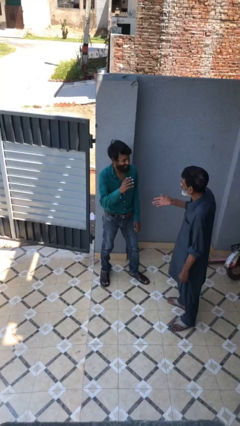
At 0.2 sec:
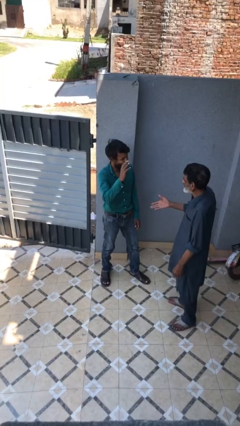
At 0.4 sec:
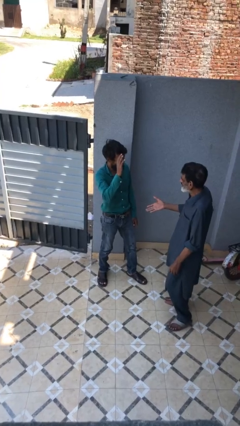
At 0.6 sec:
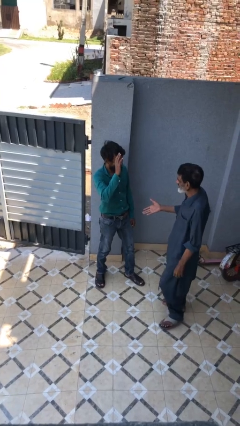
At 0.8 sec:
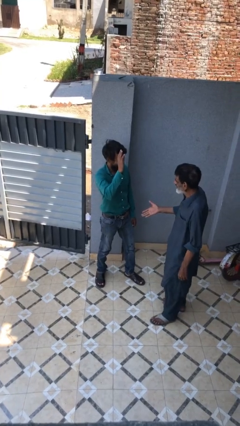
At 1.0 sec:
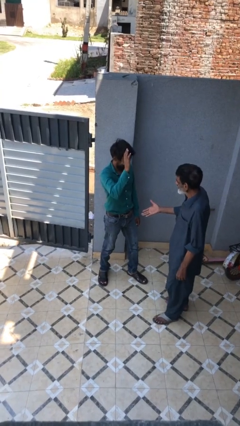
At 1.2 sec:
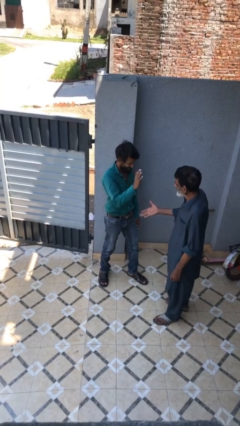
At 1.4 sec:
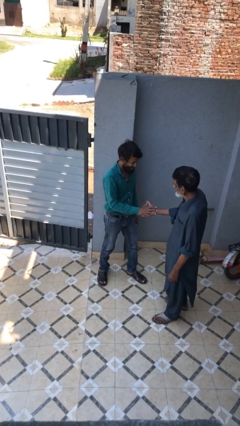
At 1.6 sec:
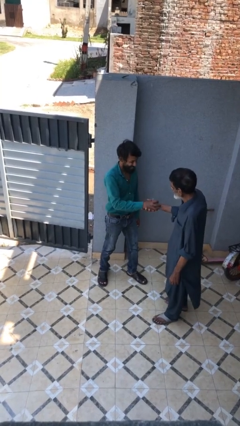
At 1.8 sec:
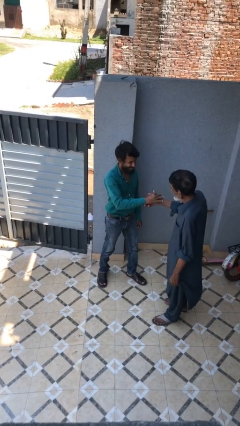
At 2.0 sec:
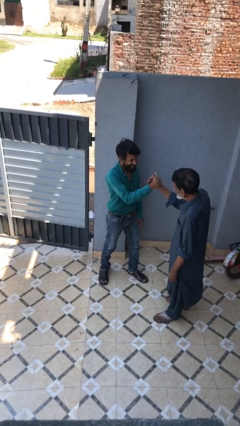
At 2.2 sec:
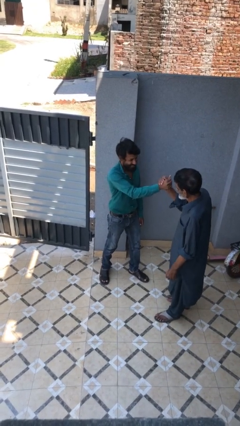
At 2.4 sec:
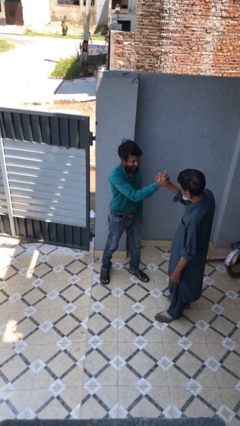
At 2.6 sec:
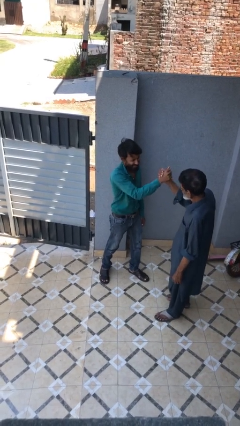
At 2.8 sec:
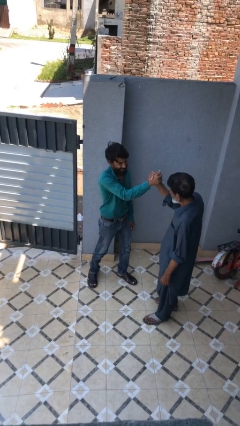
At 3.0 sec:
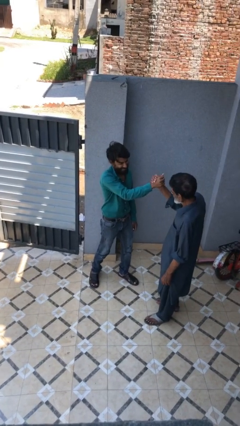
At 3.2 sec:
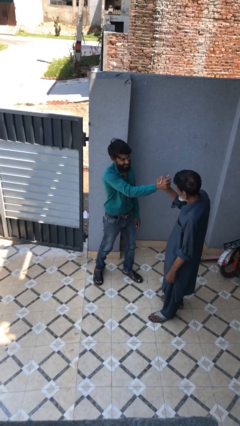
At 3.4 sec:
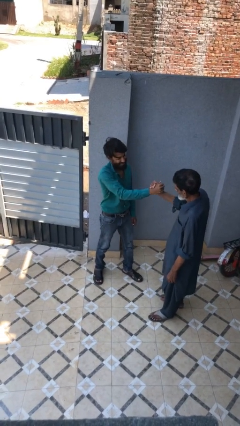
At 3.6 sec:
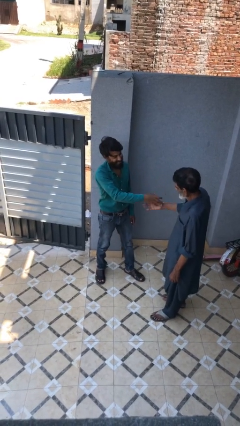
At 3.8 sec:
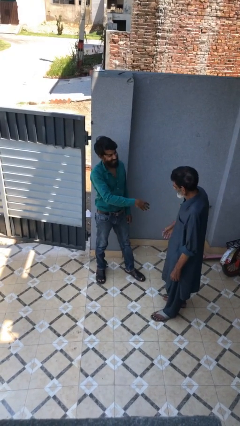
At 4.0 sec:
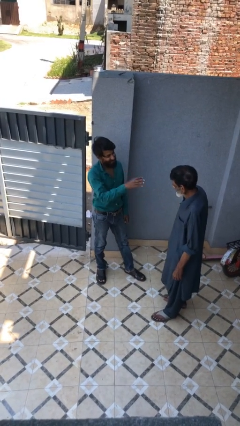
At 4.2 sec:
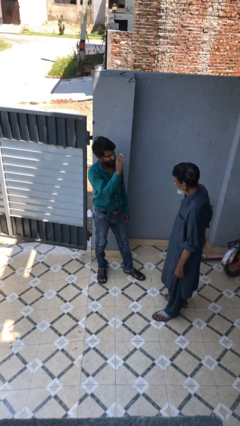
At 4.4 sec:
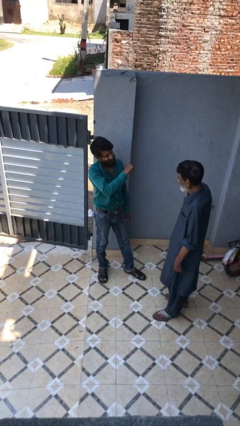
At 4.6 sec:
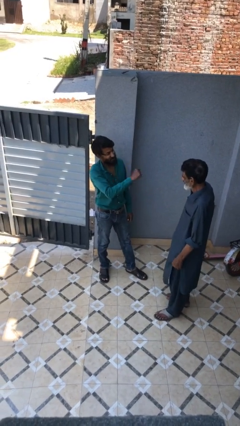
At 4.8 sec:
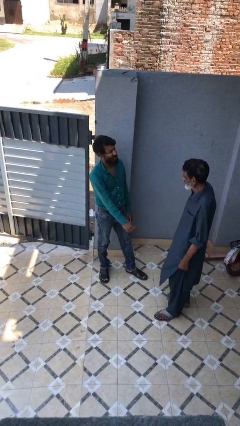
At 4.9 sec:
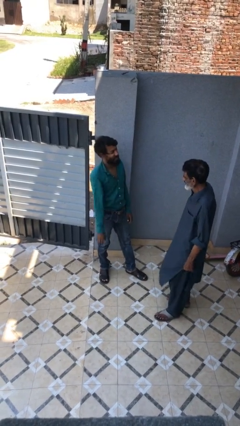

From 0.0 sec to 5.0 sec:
person highfives hand

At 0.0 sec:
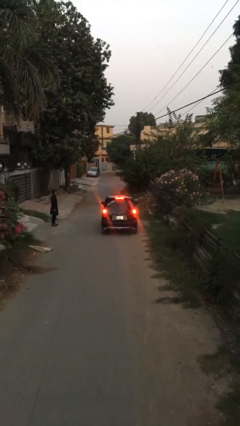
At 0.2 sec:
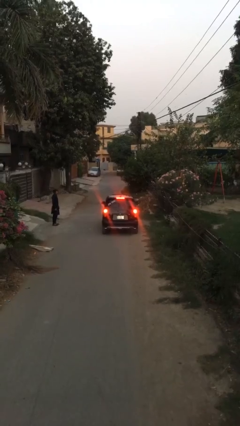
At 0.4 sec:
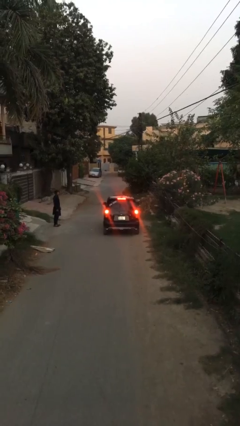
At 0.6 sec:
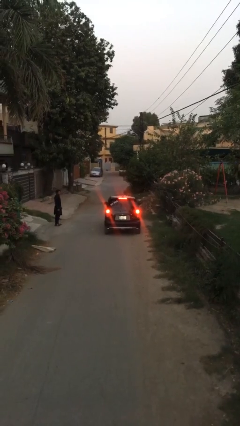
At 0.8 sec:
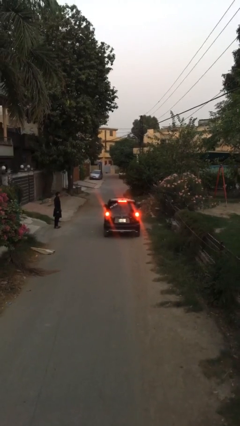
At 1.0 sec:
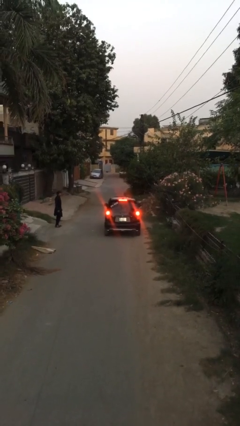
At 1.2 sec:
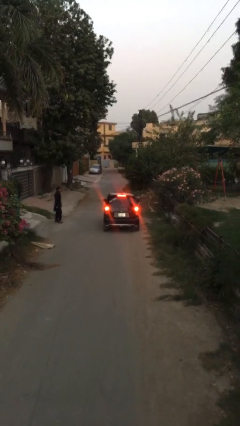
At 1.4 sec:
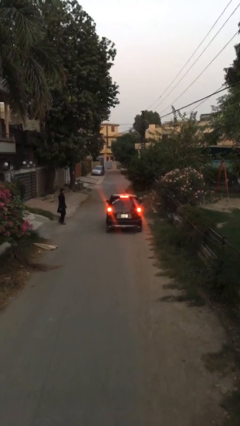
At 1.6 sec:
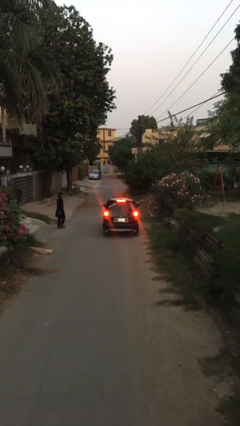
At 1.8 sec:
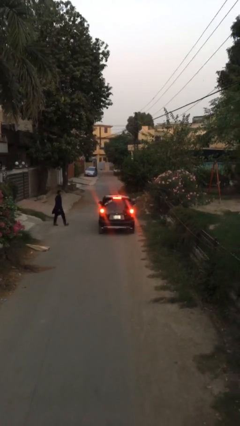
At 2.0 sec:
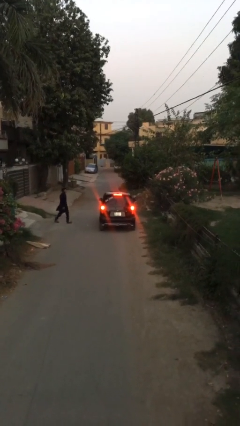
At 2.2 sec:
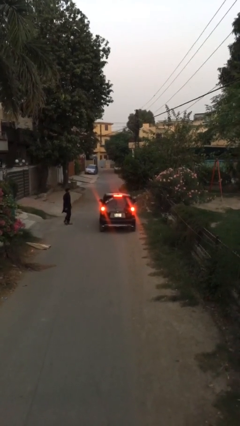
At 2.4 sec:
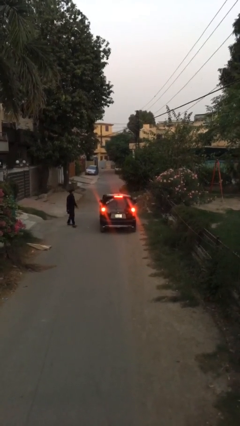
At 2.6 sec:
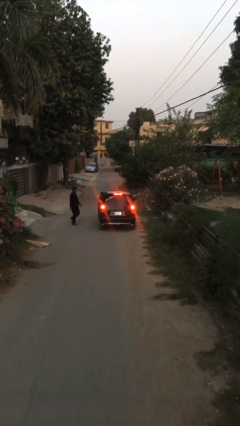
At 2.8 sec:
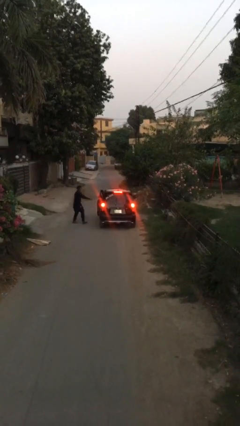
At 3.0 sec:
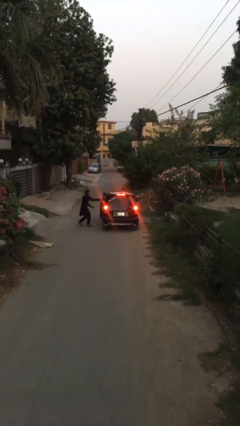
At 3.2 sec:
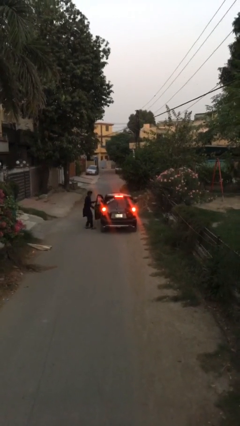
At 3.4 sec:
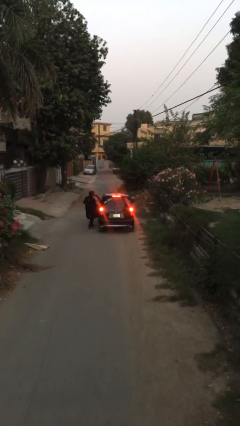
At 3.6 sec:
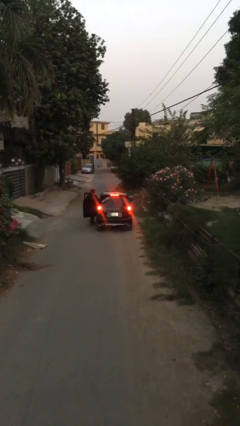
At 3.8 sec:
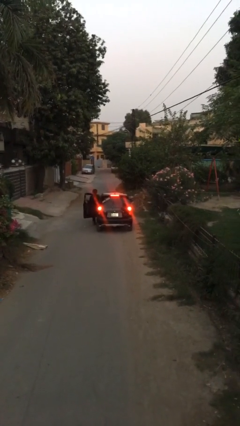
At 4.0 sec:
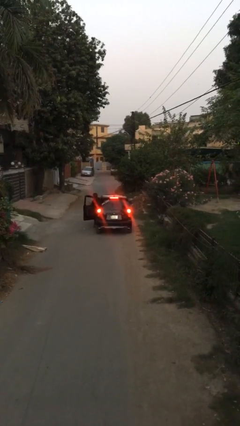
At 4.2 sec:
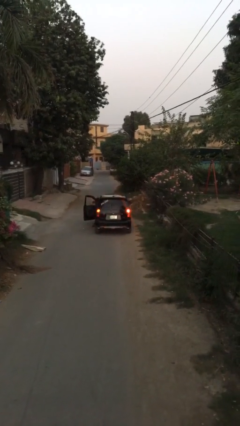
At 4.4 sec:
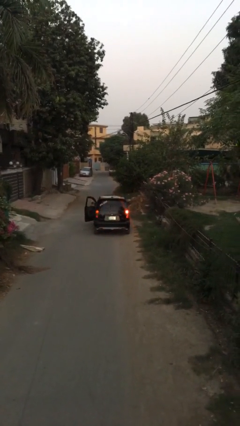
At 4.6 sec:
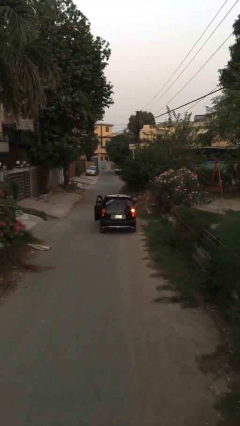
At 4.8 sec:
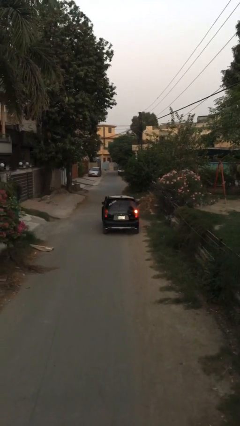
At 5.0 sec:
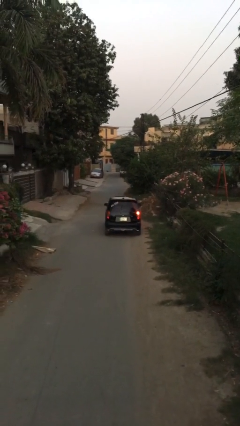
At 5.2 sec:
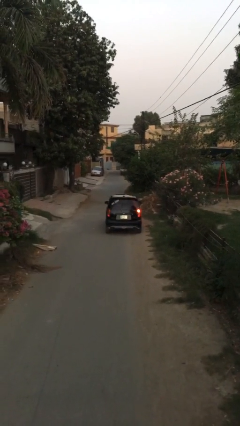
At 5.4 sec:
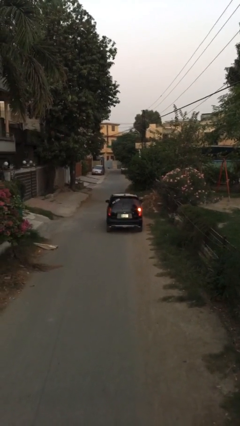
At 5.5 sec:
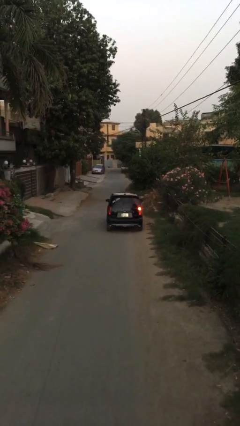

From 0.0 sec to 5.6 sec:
car picks up person

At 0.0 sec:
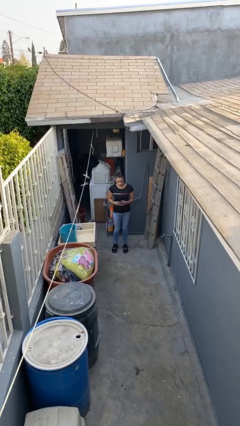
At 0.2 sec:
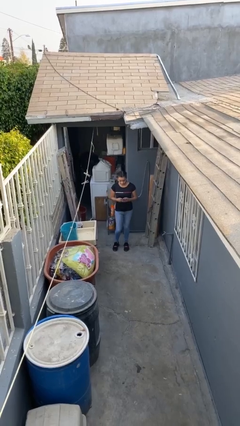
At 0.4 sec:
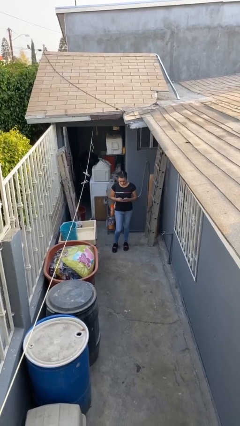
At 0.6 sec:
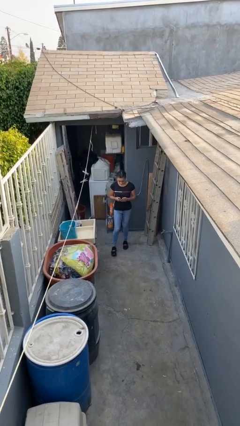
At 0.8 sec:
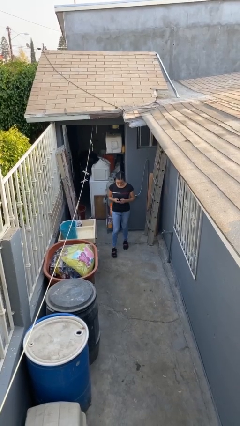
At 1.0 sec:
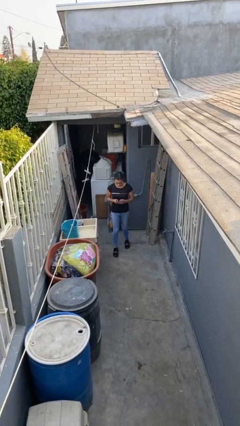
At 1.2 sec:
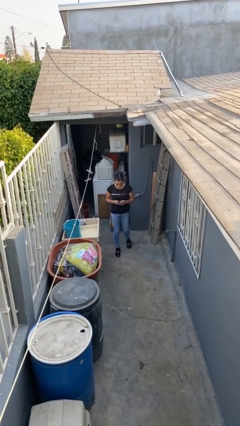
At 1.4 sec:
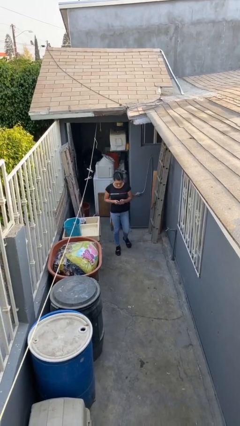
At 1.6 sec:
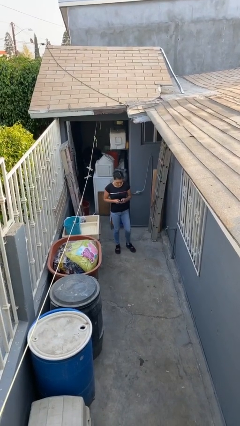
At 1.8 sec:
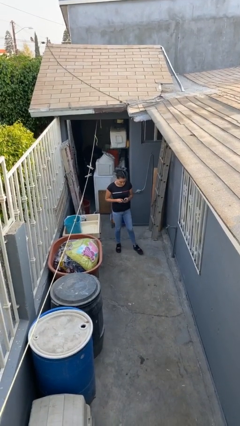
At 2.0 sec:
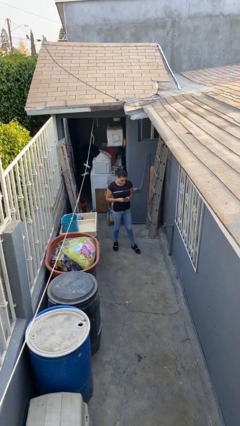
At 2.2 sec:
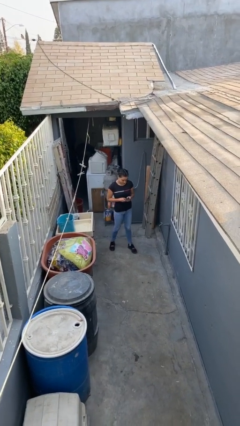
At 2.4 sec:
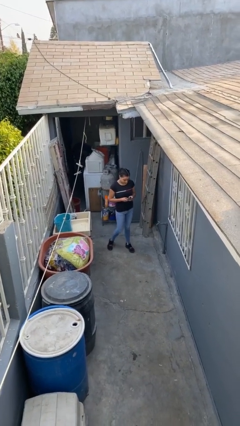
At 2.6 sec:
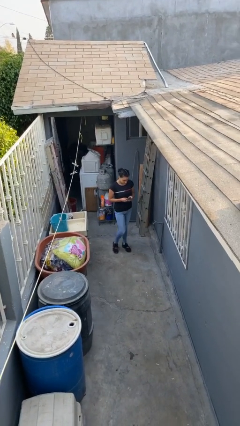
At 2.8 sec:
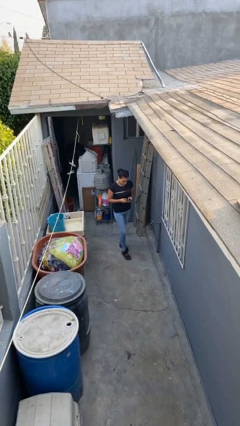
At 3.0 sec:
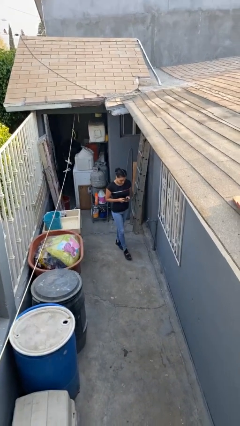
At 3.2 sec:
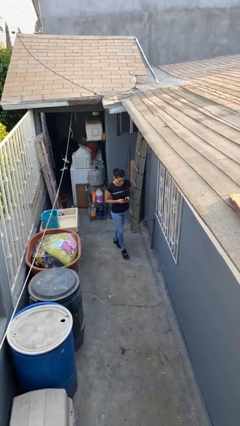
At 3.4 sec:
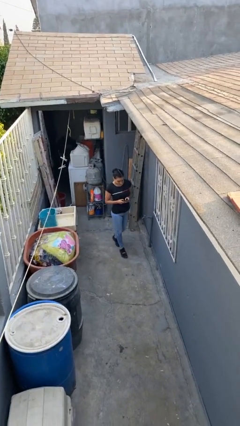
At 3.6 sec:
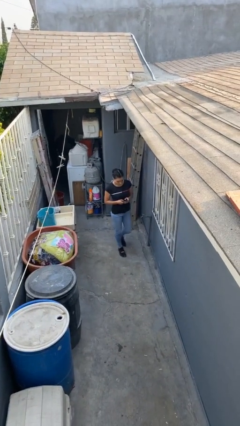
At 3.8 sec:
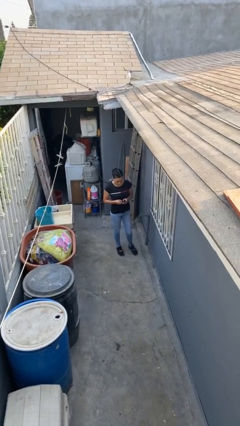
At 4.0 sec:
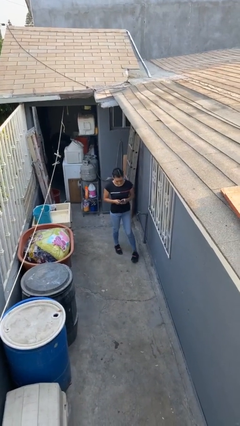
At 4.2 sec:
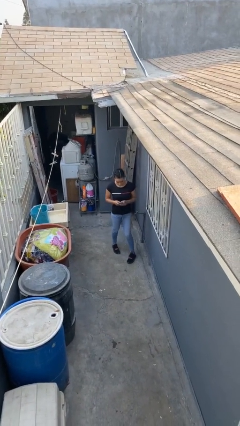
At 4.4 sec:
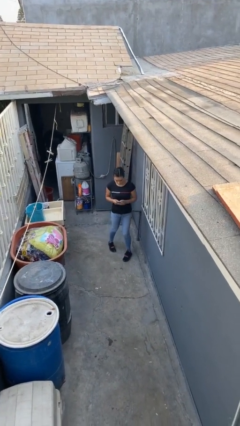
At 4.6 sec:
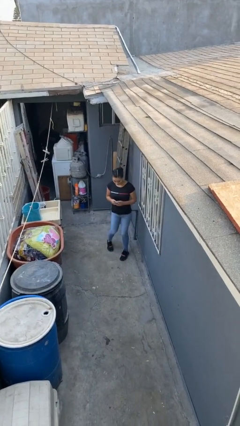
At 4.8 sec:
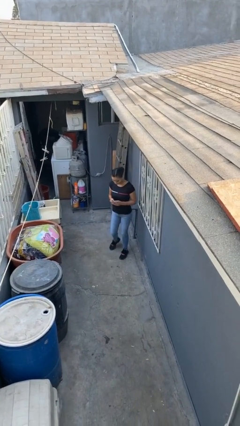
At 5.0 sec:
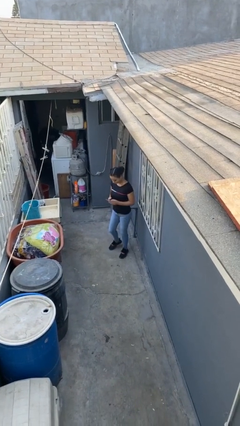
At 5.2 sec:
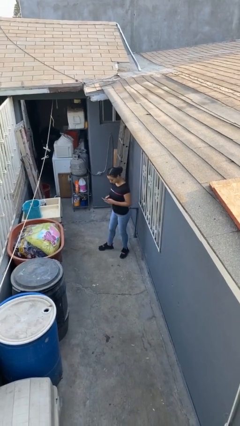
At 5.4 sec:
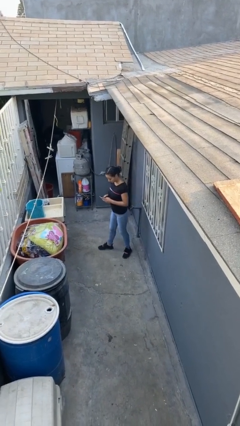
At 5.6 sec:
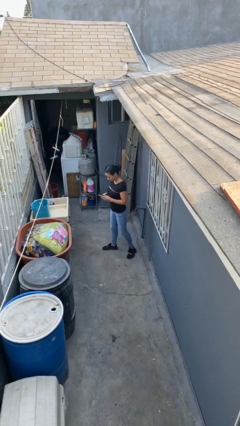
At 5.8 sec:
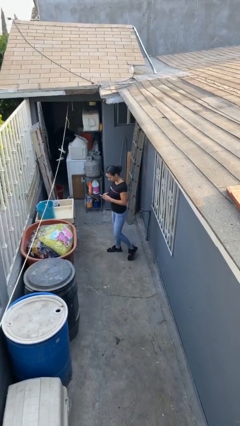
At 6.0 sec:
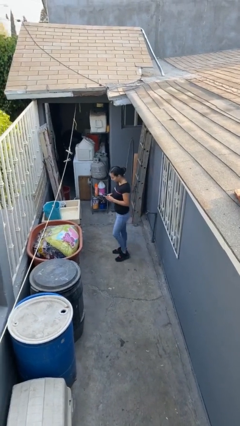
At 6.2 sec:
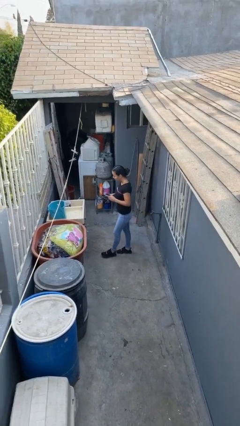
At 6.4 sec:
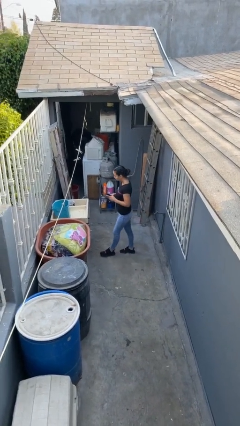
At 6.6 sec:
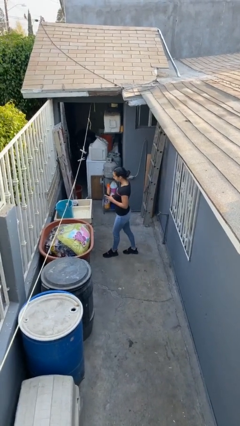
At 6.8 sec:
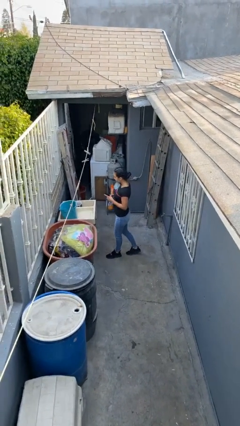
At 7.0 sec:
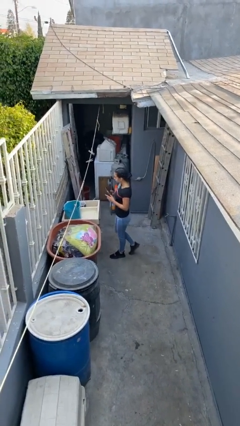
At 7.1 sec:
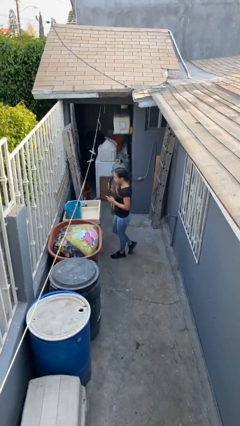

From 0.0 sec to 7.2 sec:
person texts on phone

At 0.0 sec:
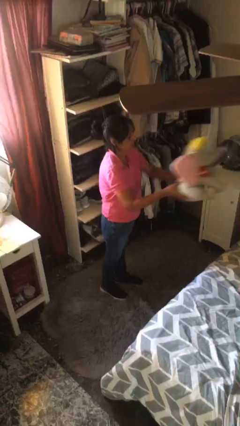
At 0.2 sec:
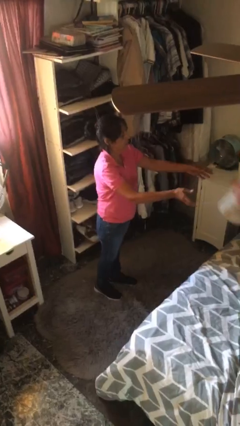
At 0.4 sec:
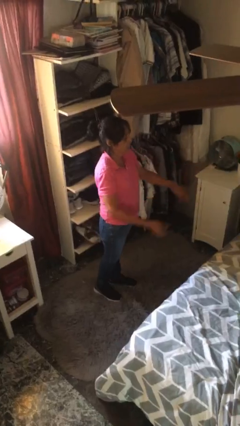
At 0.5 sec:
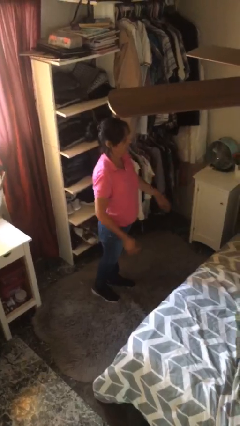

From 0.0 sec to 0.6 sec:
person throws object on bed
